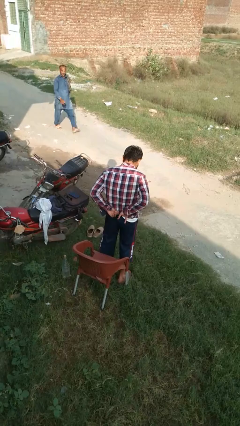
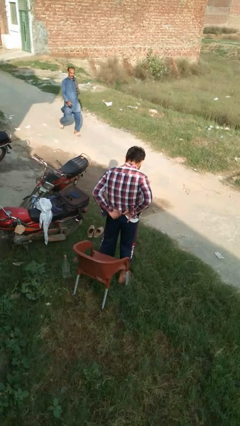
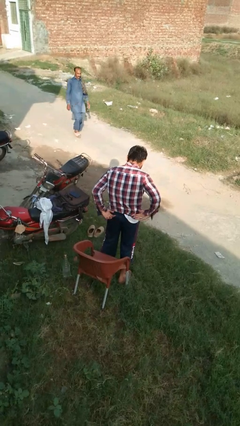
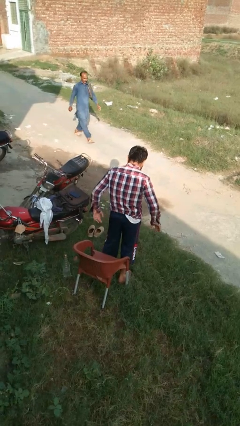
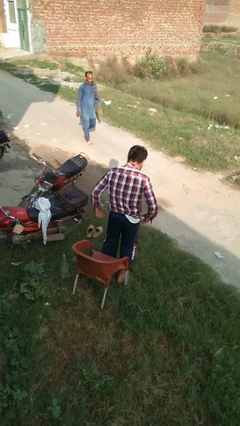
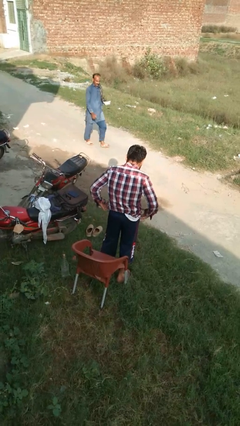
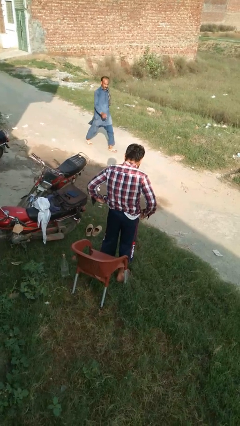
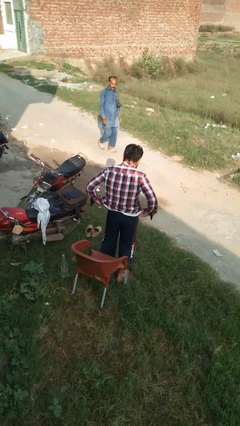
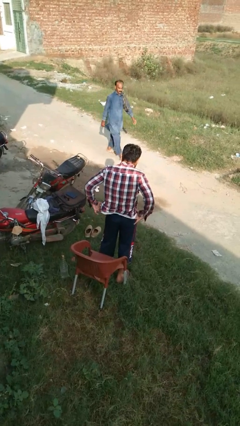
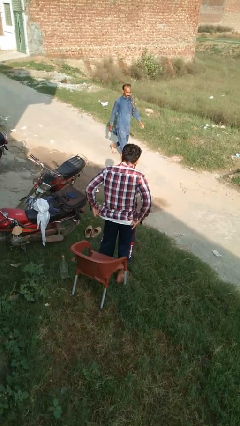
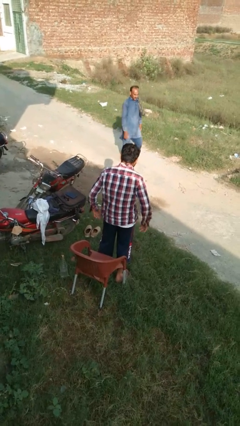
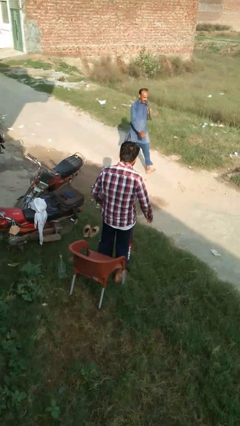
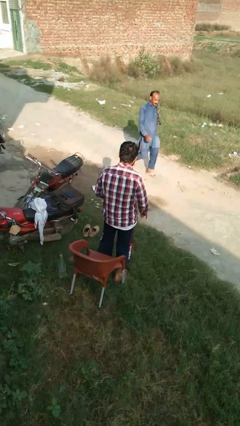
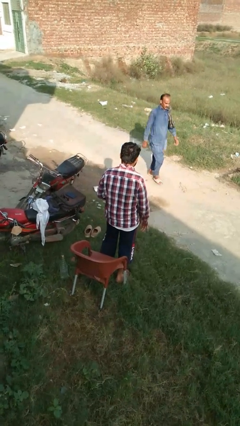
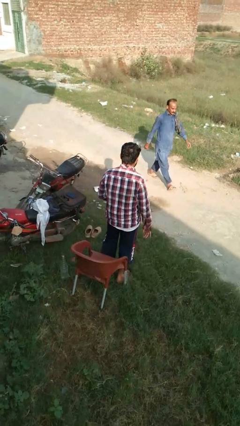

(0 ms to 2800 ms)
person untucks shirt

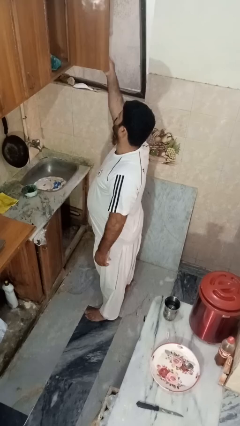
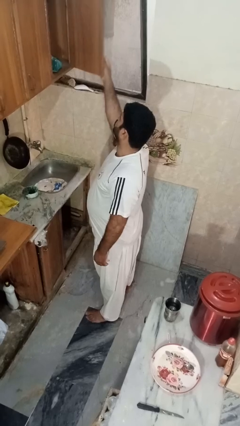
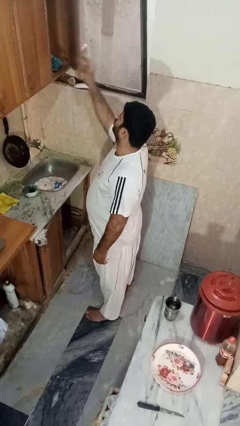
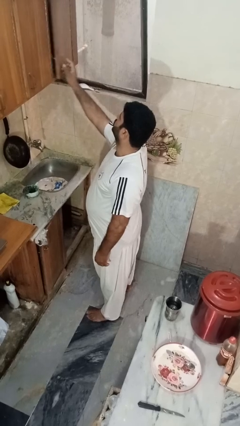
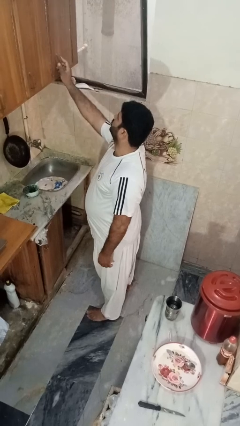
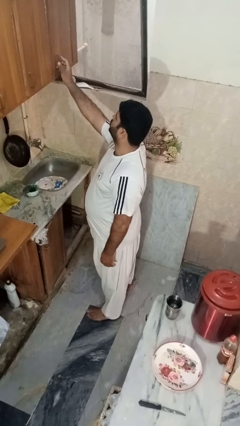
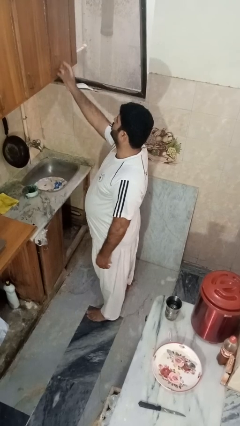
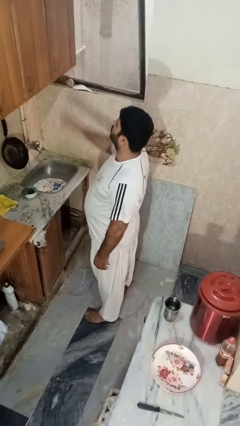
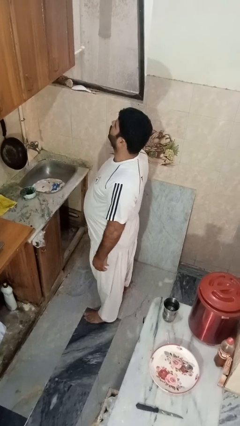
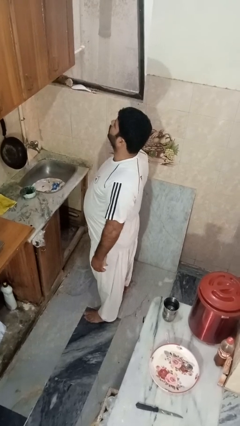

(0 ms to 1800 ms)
person closes cabinet

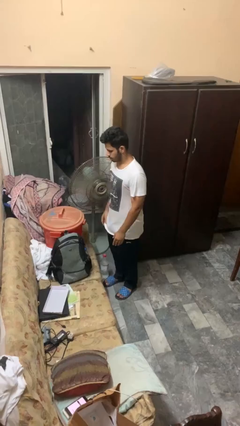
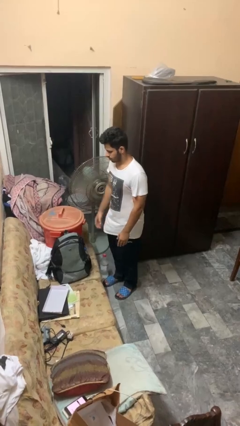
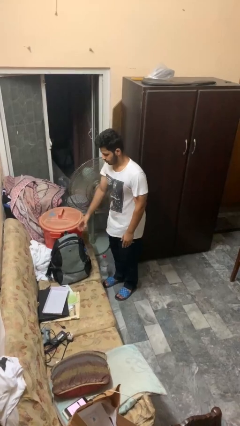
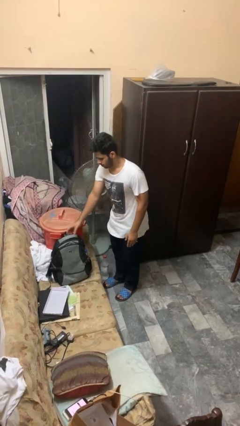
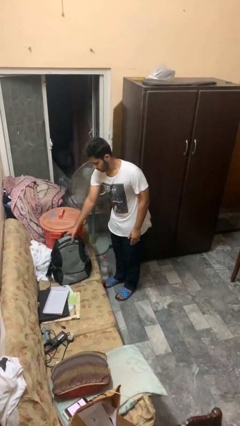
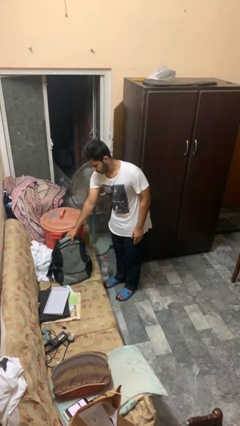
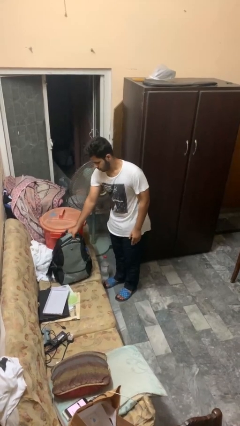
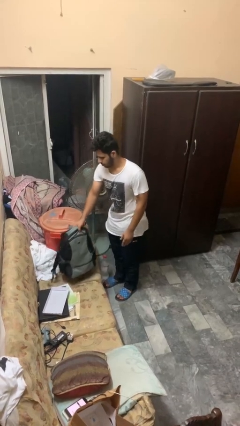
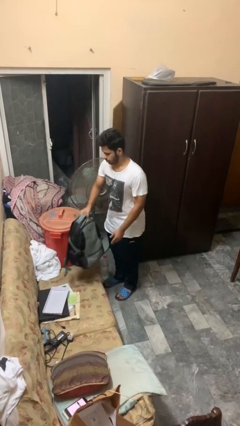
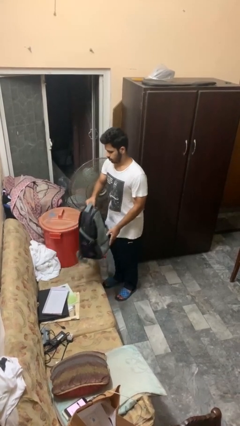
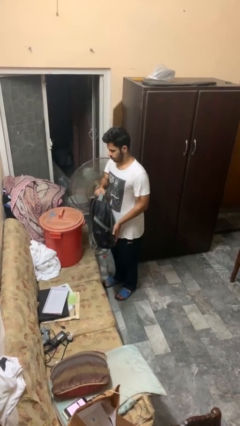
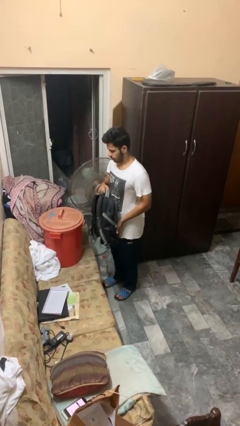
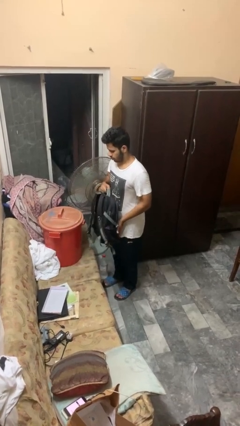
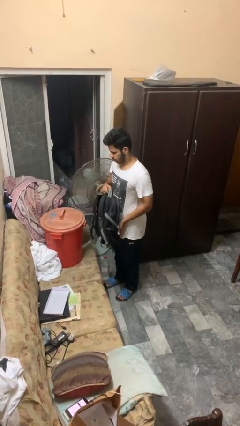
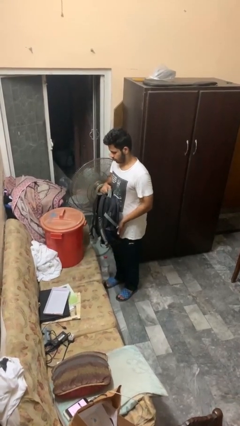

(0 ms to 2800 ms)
person picks up object from couch

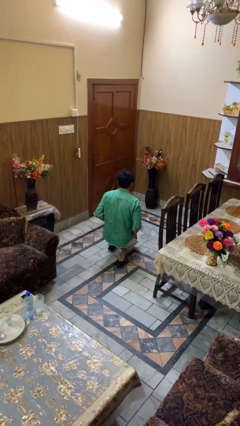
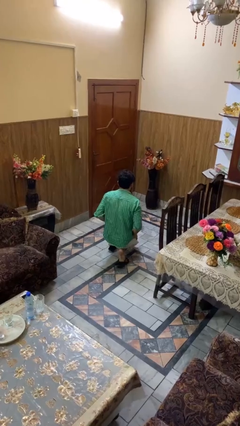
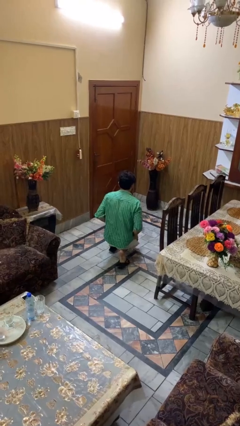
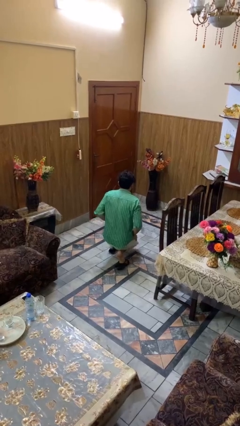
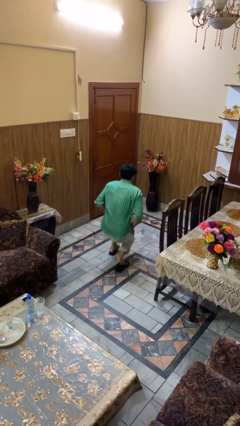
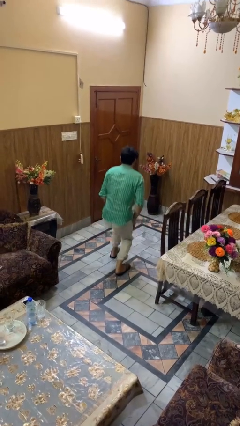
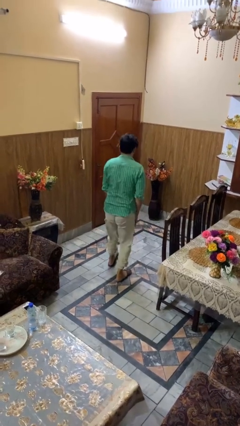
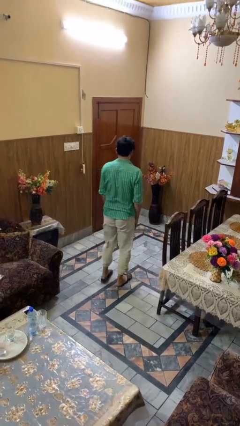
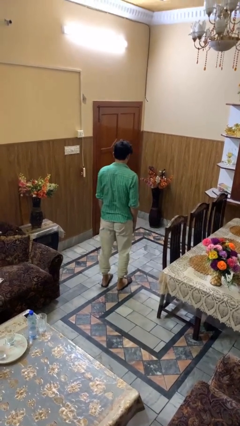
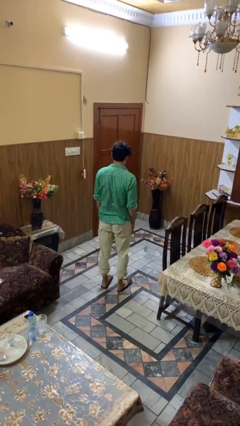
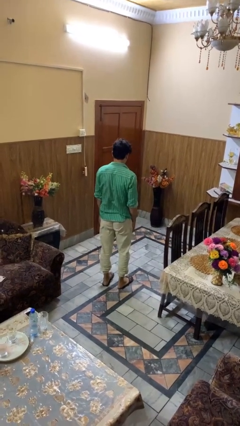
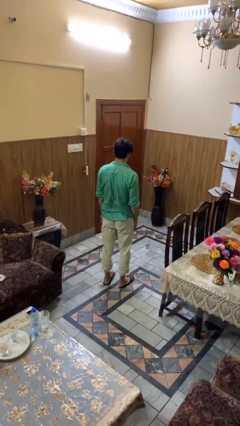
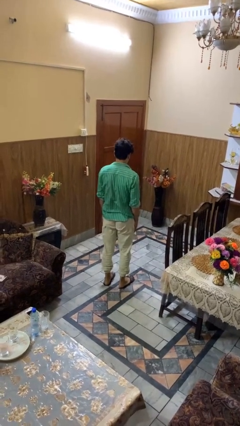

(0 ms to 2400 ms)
person stands up from floor

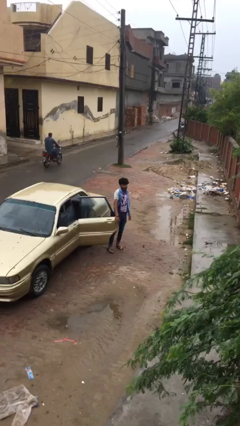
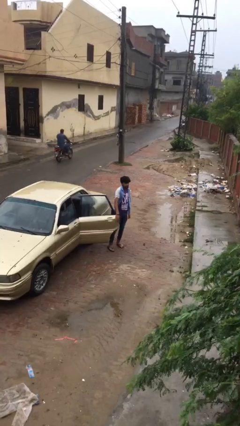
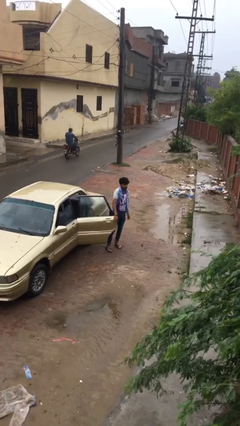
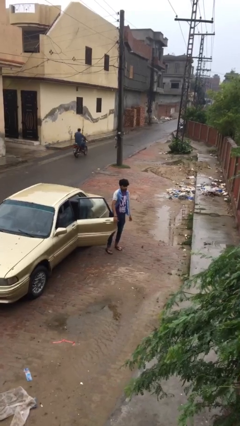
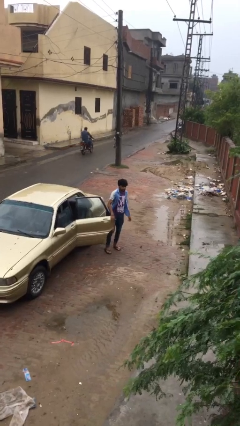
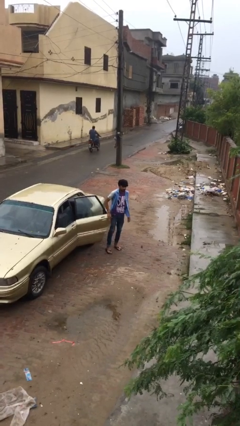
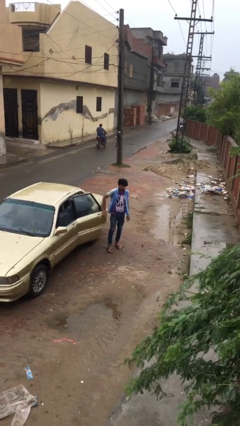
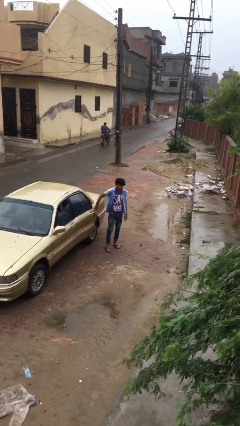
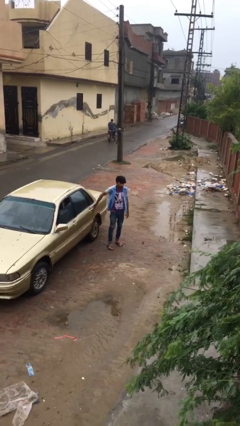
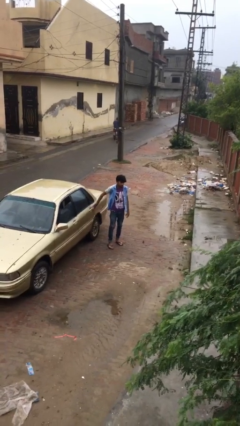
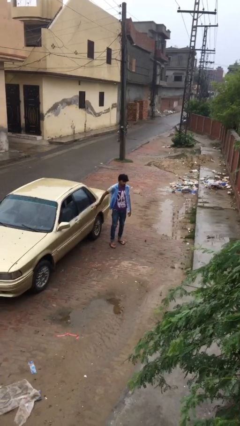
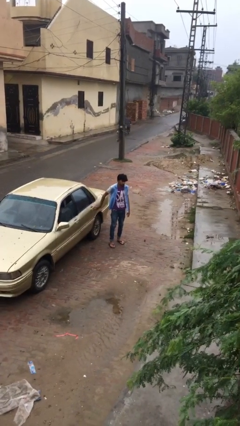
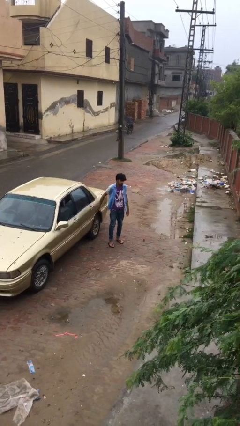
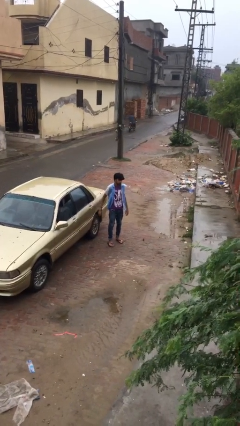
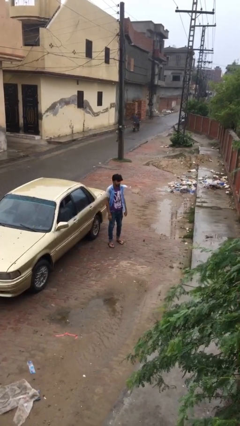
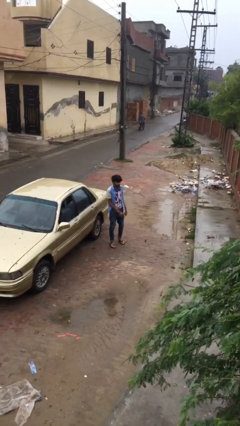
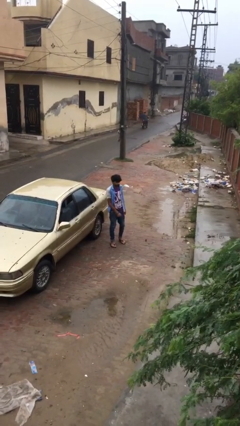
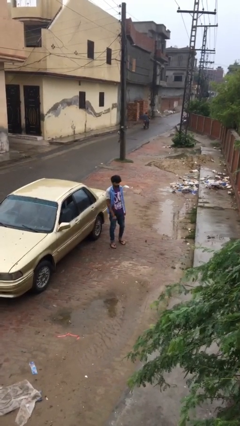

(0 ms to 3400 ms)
person closes car door

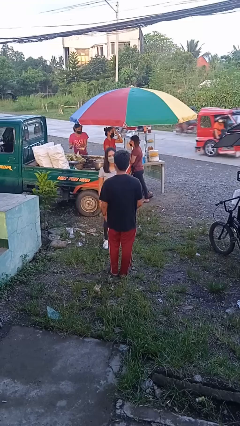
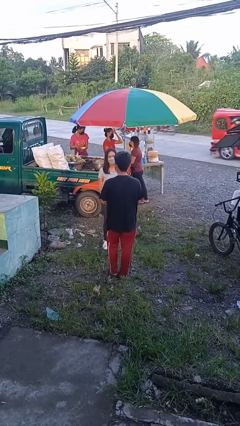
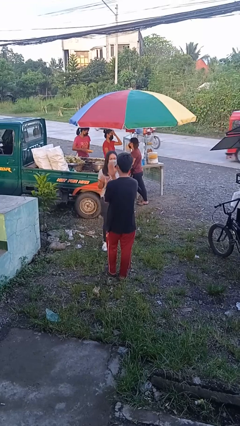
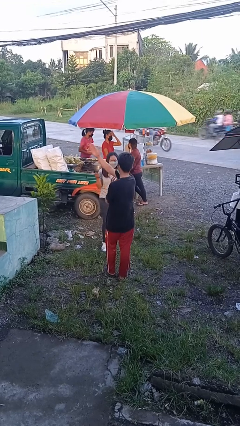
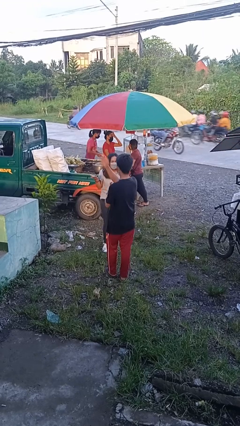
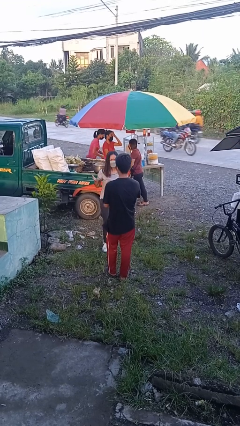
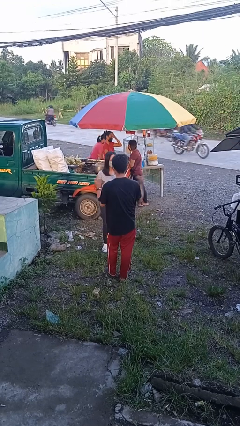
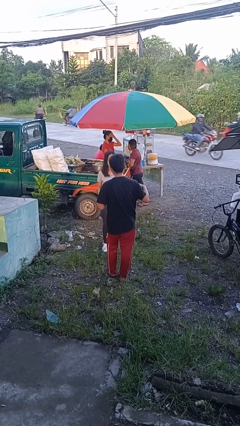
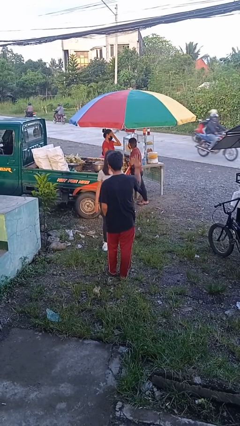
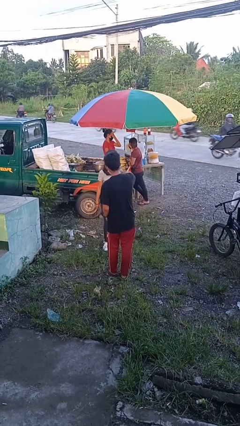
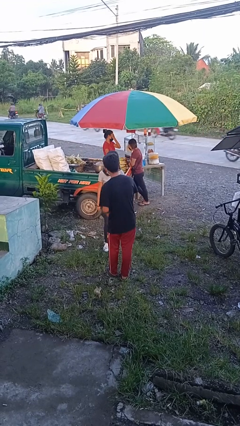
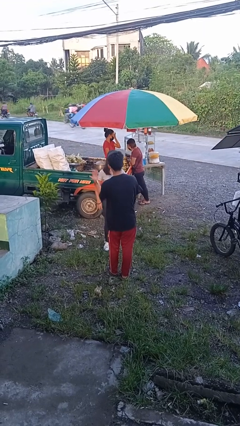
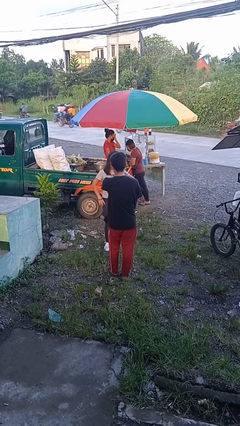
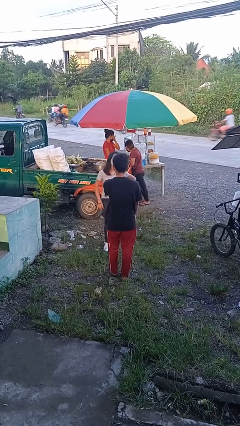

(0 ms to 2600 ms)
person talks to person

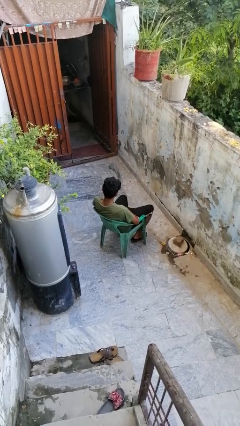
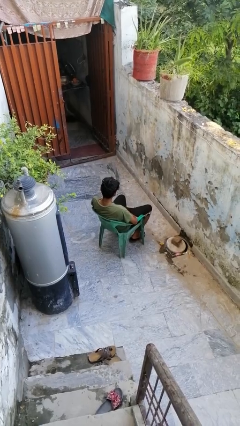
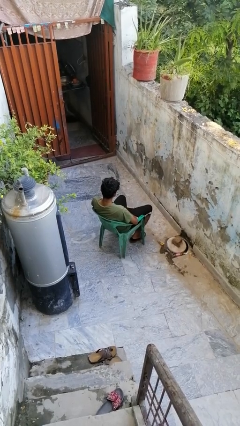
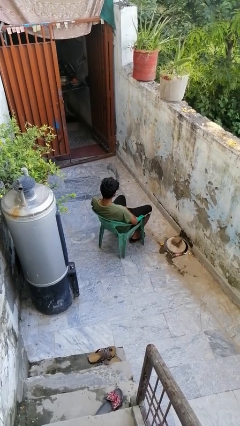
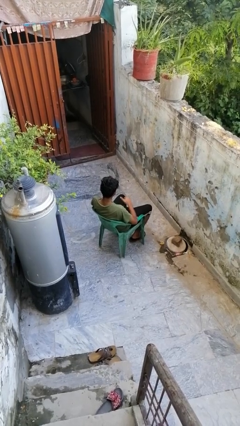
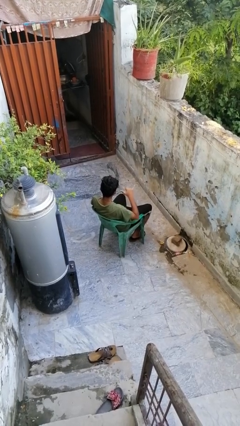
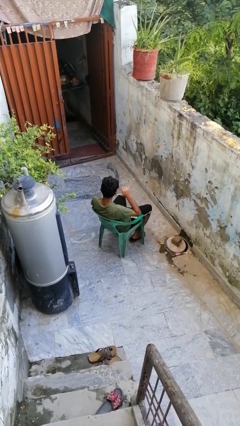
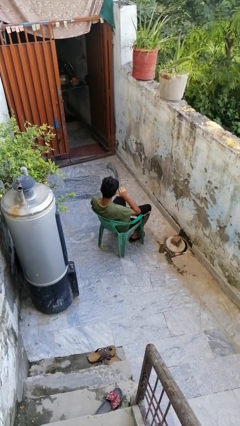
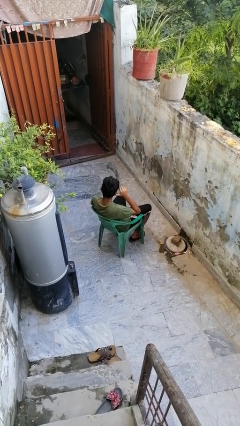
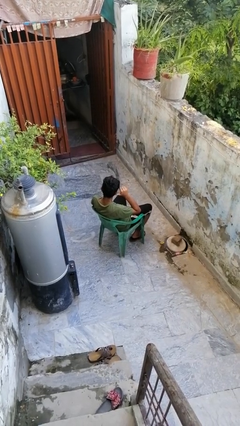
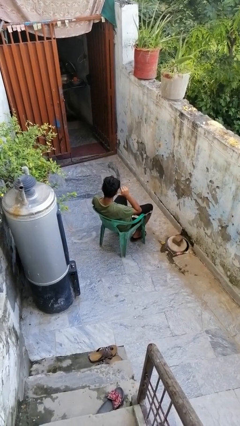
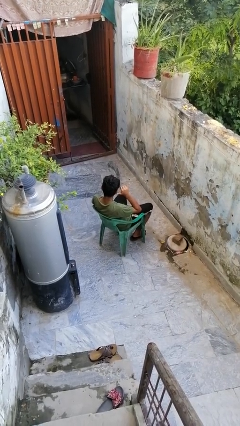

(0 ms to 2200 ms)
person gestures call me
